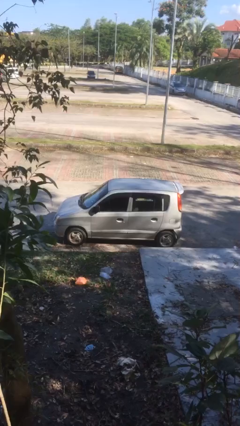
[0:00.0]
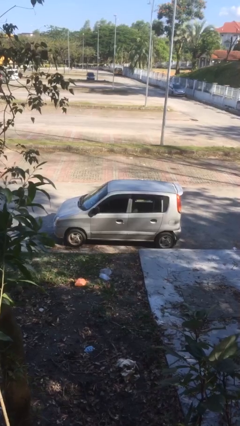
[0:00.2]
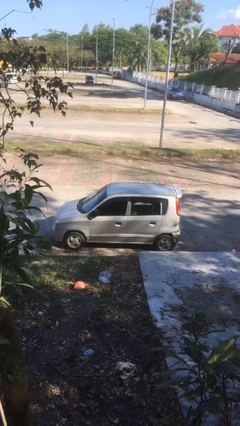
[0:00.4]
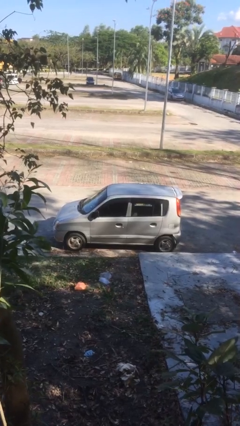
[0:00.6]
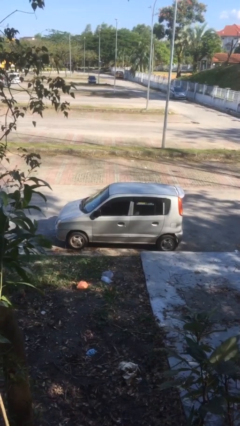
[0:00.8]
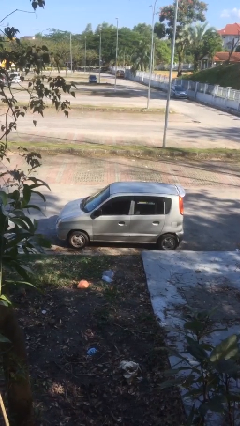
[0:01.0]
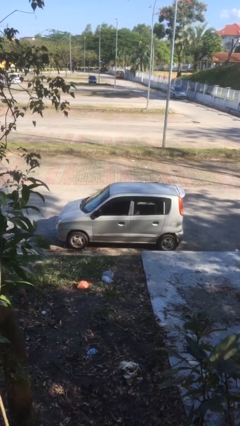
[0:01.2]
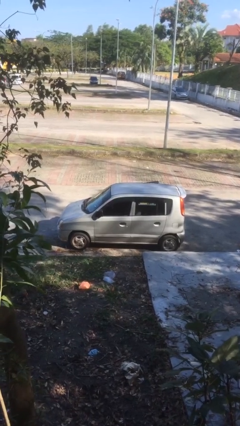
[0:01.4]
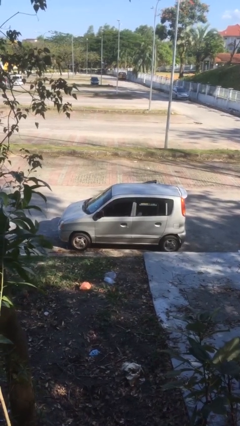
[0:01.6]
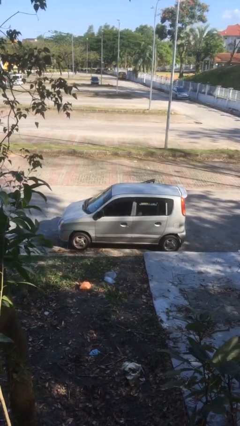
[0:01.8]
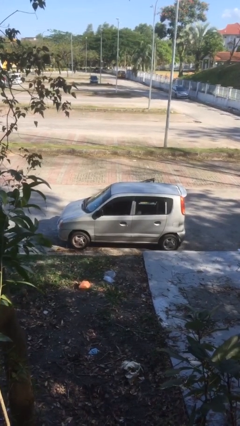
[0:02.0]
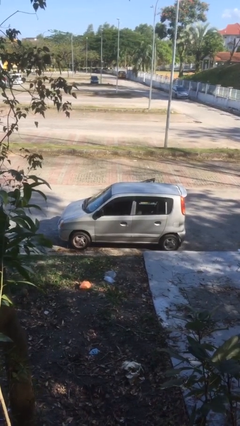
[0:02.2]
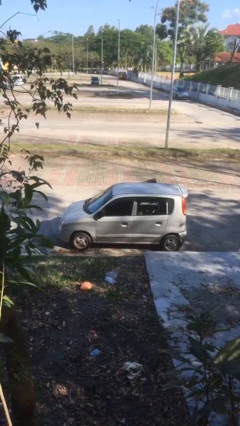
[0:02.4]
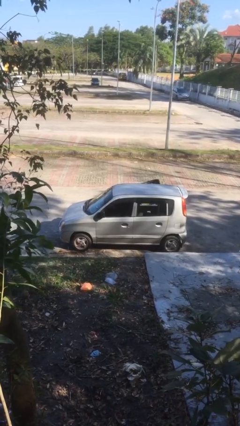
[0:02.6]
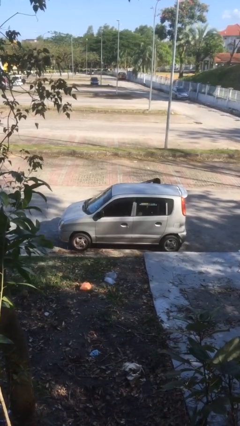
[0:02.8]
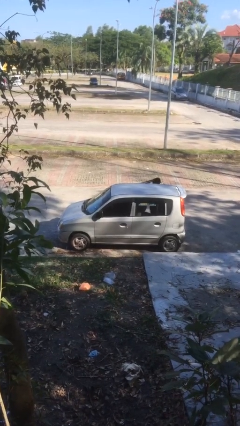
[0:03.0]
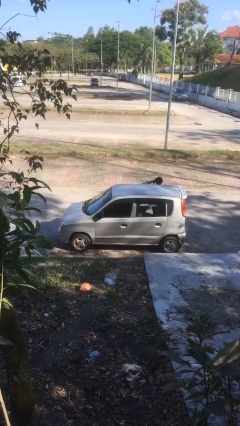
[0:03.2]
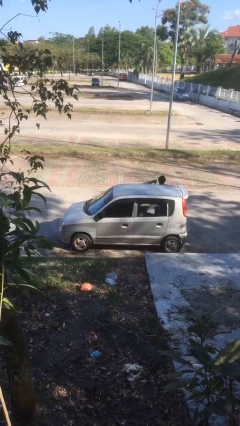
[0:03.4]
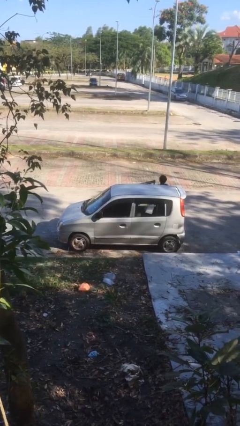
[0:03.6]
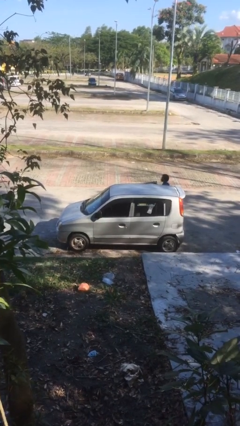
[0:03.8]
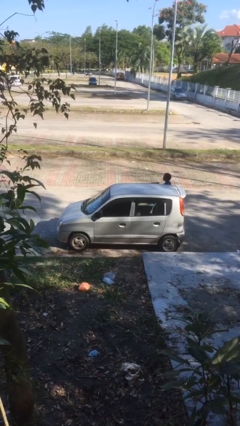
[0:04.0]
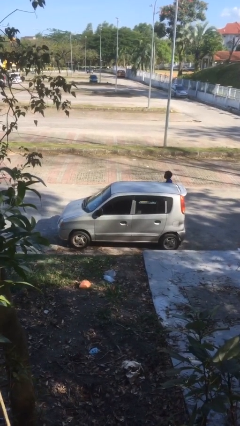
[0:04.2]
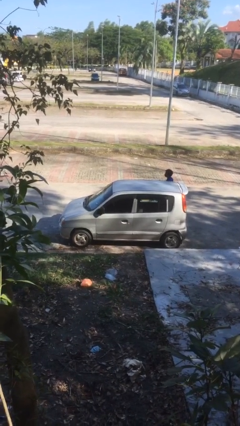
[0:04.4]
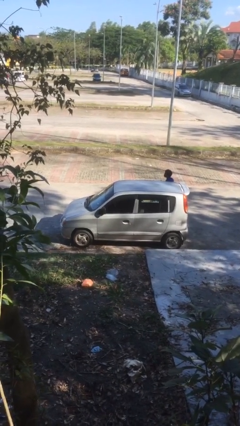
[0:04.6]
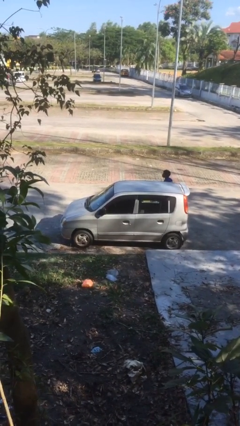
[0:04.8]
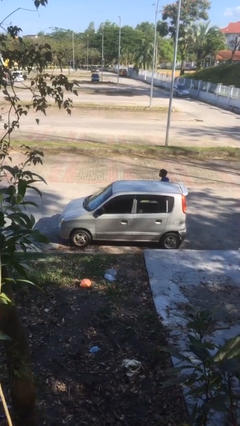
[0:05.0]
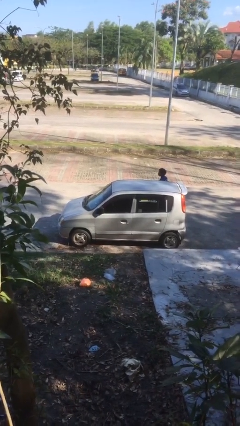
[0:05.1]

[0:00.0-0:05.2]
car drops off person

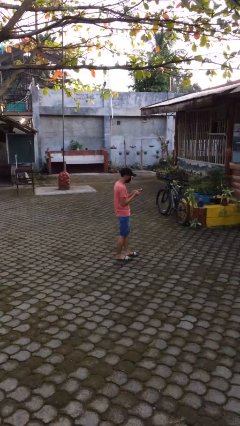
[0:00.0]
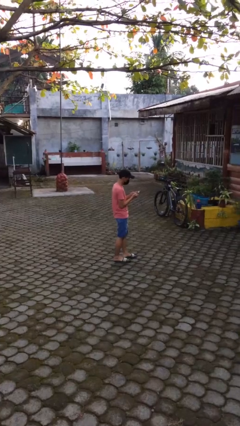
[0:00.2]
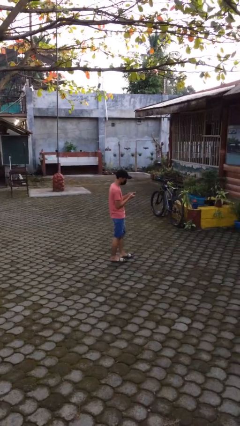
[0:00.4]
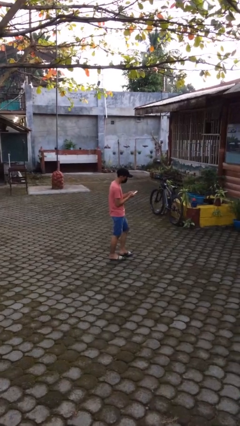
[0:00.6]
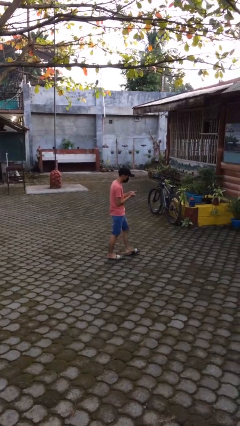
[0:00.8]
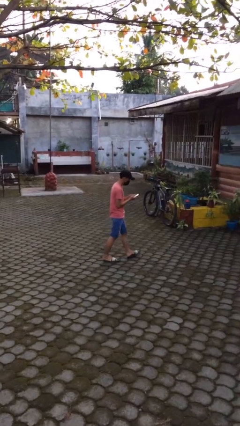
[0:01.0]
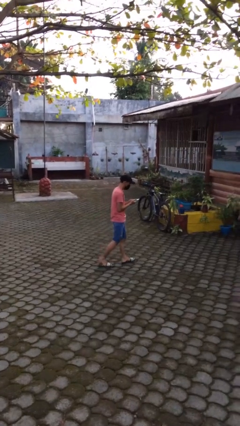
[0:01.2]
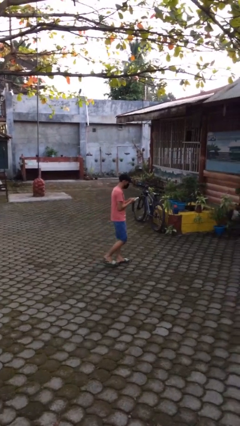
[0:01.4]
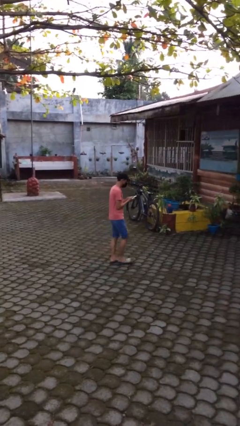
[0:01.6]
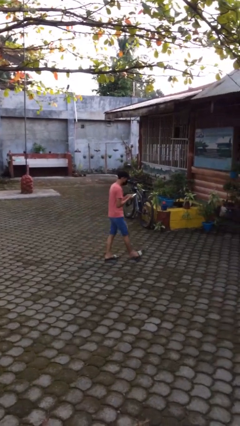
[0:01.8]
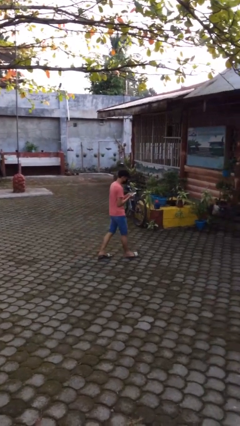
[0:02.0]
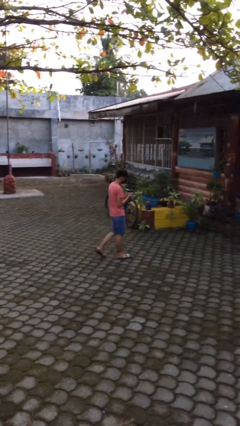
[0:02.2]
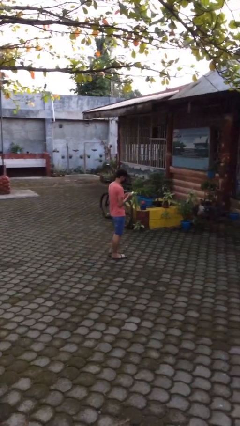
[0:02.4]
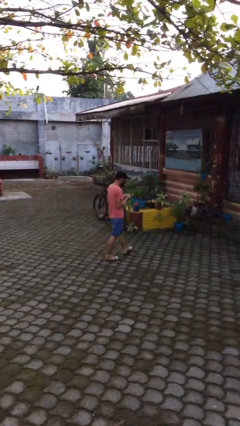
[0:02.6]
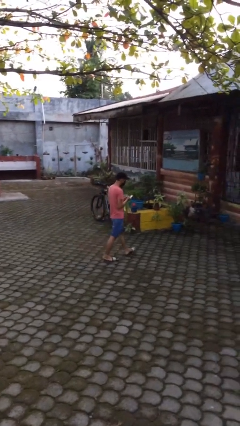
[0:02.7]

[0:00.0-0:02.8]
person texts on phone

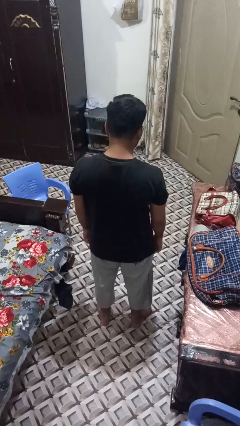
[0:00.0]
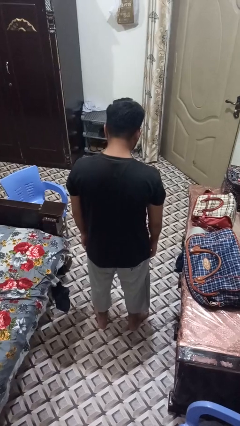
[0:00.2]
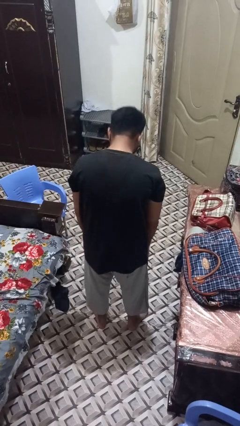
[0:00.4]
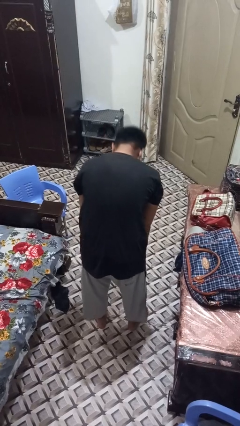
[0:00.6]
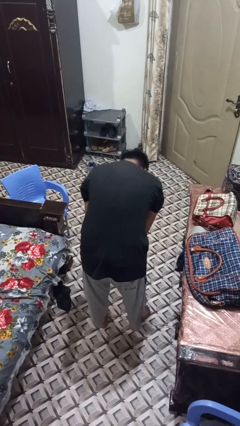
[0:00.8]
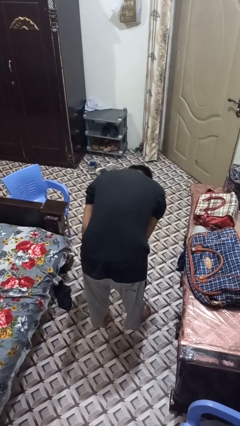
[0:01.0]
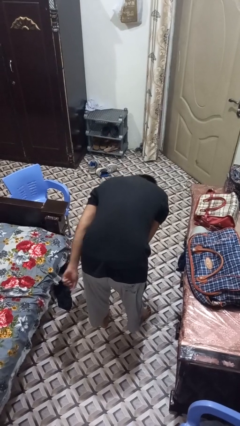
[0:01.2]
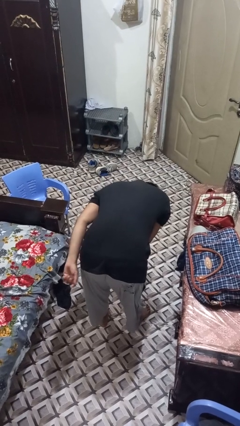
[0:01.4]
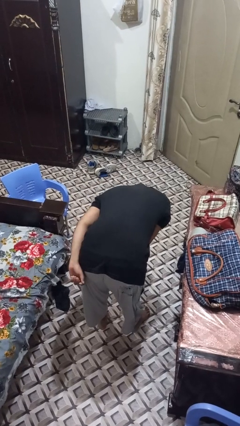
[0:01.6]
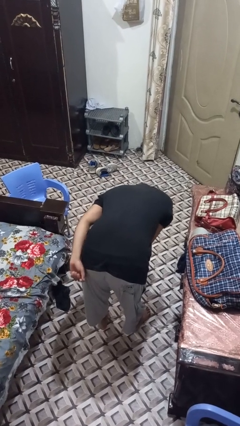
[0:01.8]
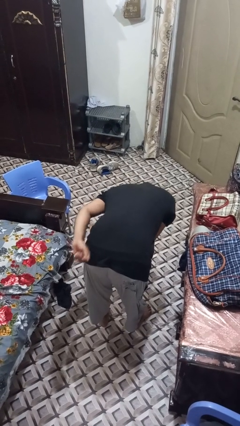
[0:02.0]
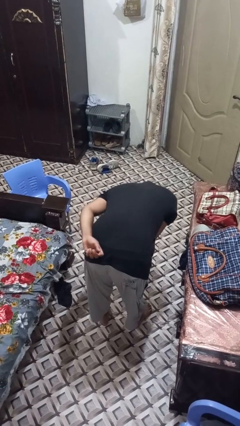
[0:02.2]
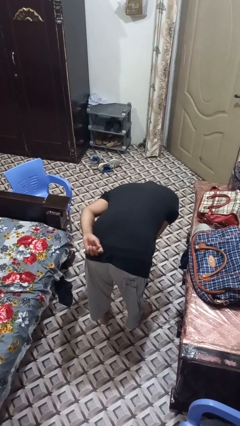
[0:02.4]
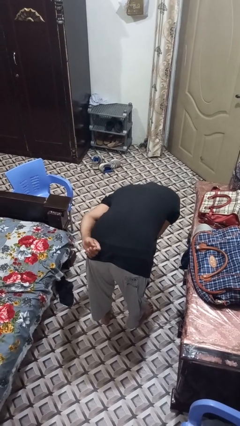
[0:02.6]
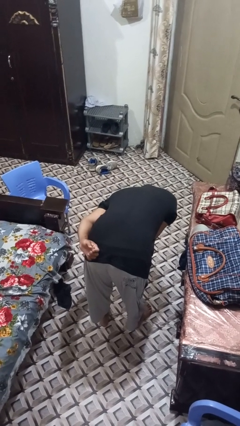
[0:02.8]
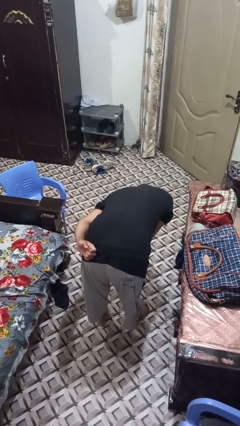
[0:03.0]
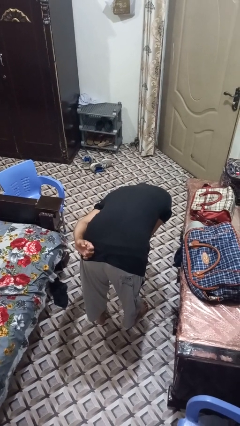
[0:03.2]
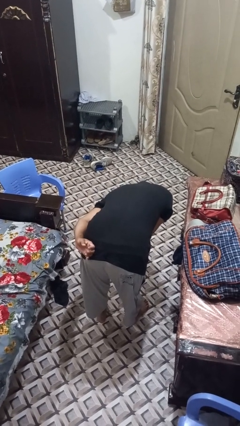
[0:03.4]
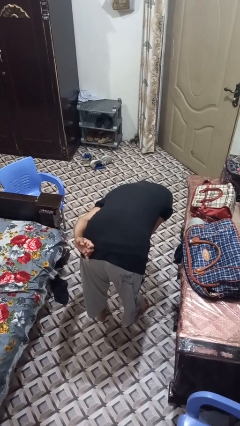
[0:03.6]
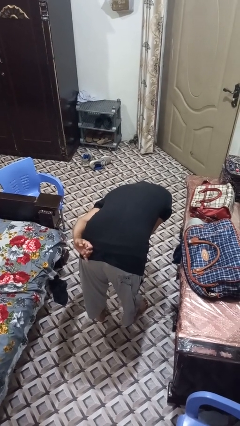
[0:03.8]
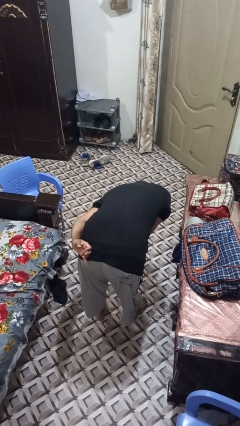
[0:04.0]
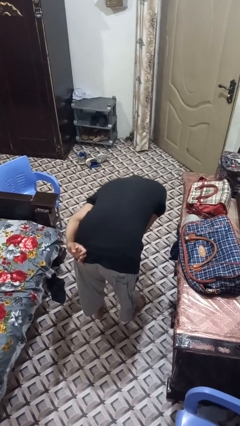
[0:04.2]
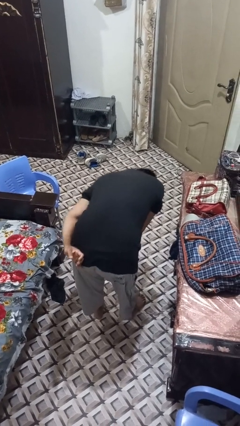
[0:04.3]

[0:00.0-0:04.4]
person kneels

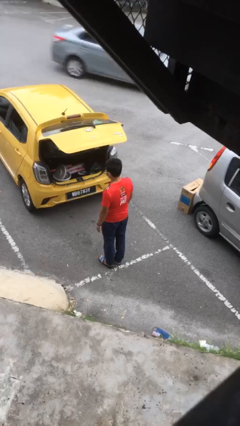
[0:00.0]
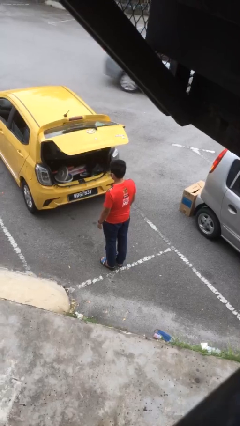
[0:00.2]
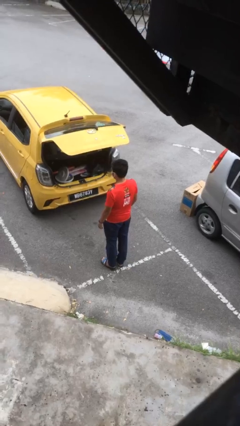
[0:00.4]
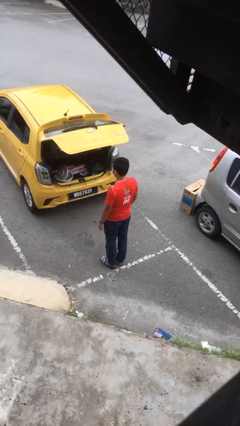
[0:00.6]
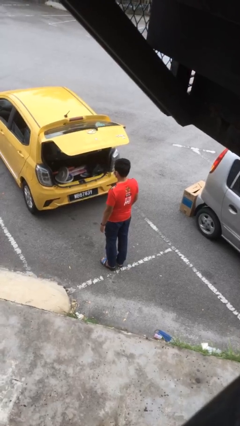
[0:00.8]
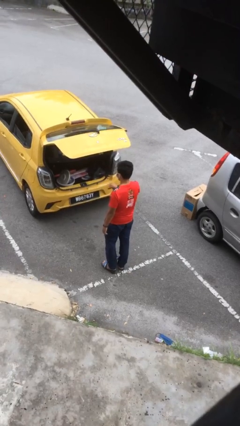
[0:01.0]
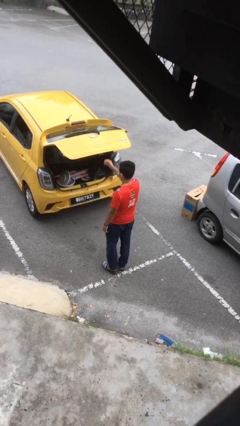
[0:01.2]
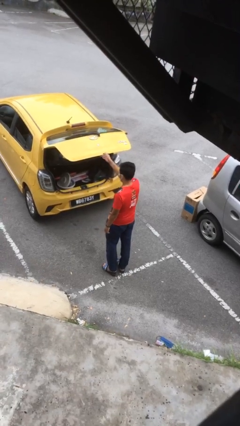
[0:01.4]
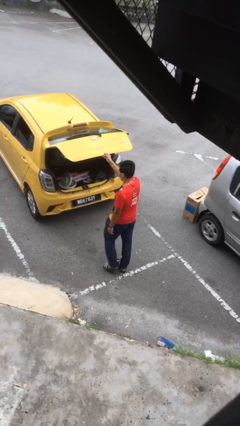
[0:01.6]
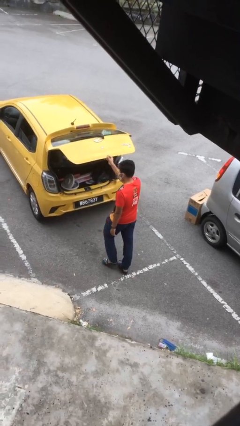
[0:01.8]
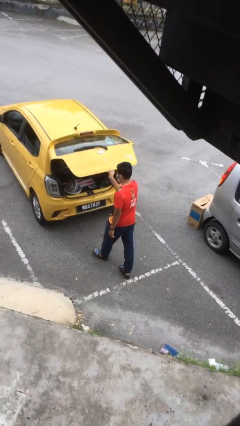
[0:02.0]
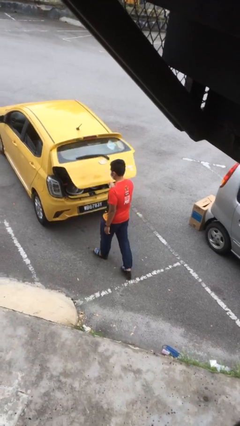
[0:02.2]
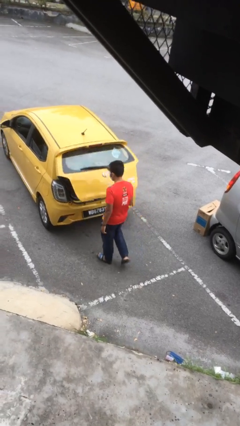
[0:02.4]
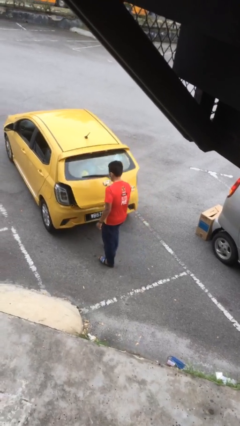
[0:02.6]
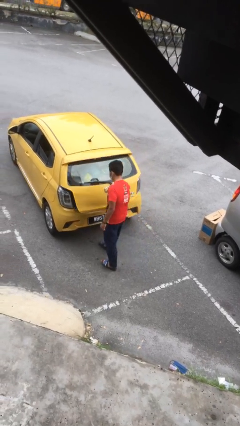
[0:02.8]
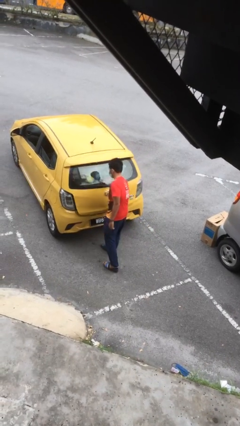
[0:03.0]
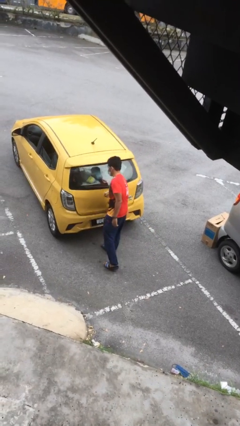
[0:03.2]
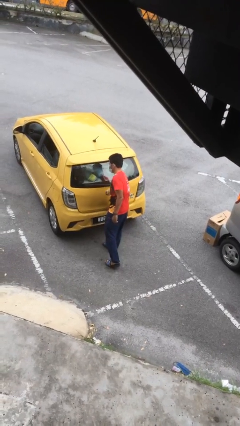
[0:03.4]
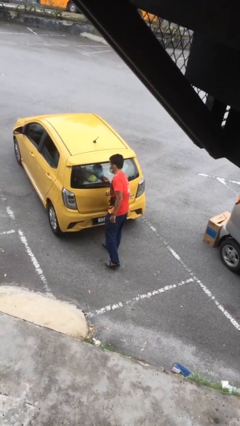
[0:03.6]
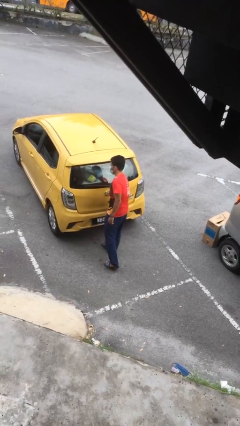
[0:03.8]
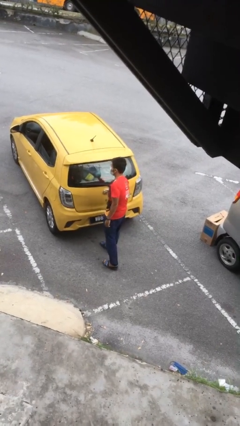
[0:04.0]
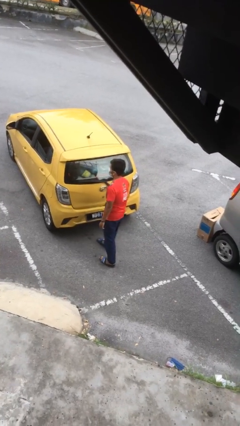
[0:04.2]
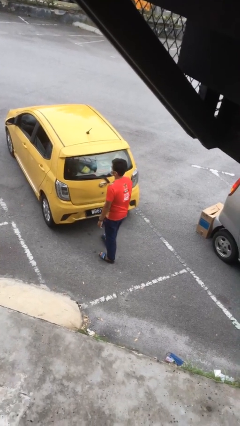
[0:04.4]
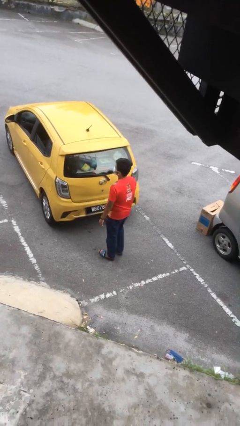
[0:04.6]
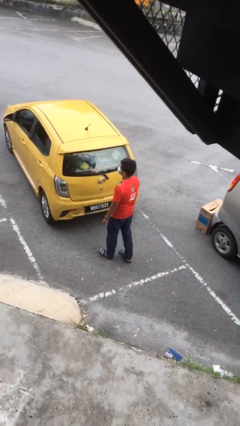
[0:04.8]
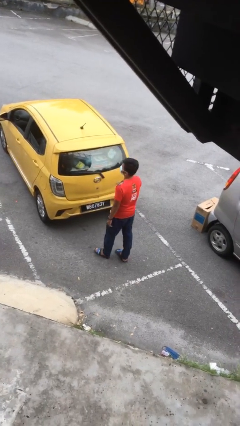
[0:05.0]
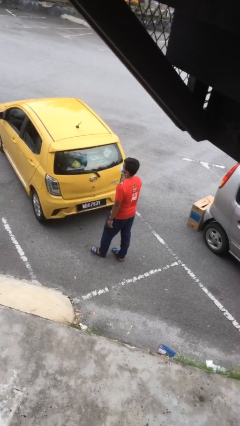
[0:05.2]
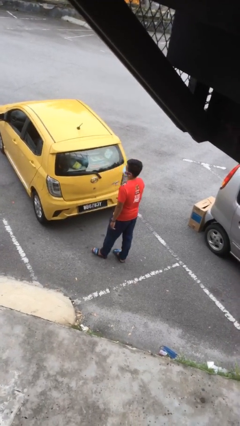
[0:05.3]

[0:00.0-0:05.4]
person closes car trunk
